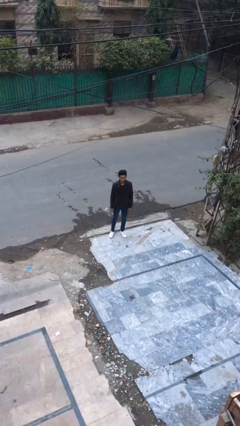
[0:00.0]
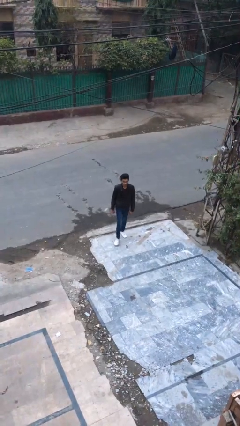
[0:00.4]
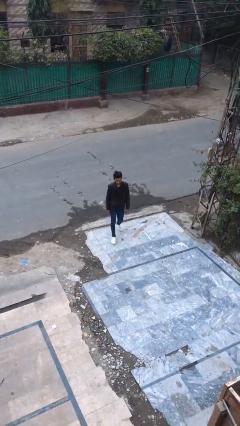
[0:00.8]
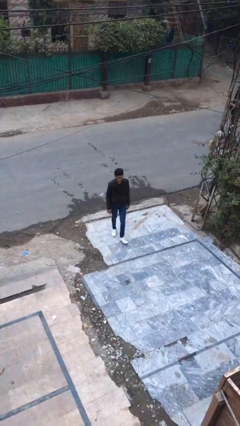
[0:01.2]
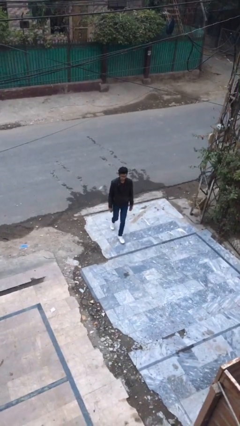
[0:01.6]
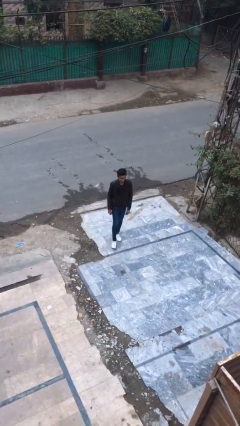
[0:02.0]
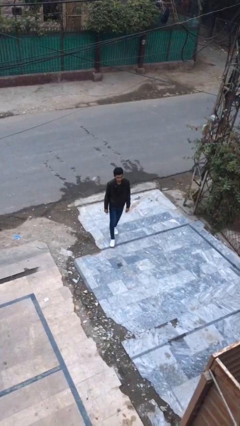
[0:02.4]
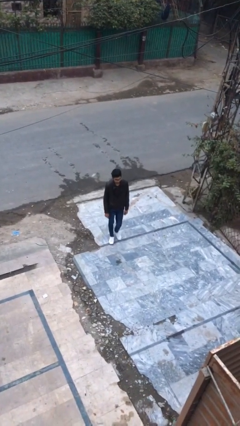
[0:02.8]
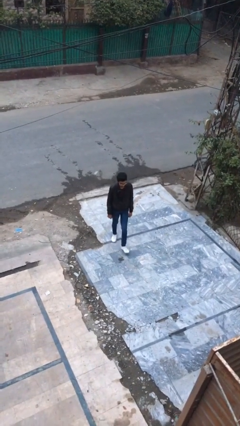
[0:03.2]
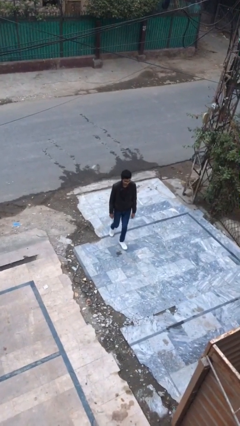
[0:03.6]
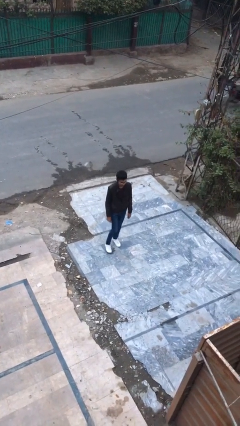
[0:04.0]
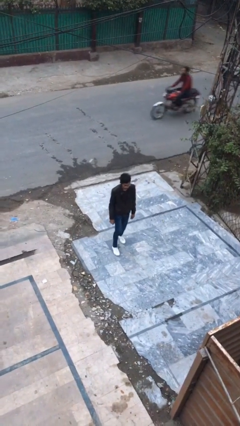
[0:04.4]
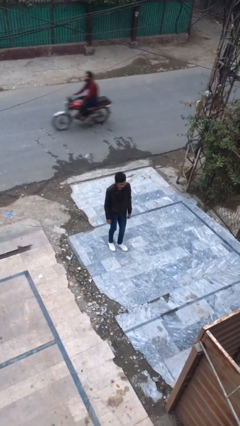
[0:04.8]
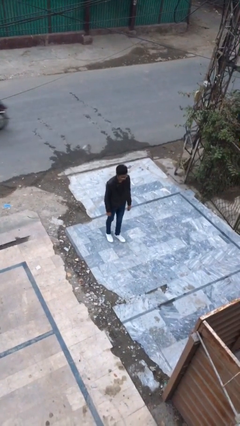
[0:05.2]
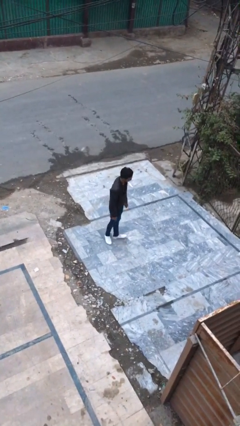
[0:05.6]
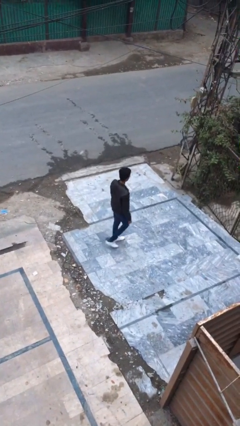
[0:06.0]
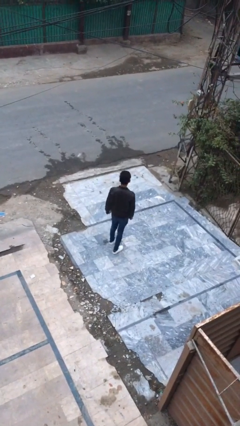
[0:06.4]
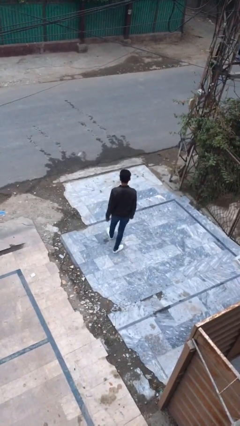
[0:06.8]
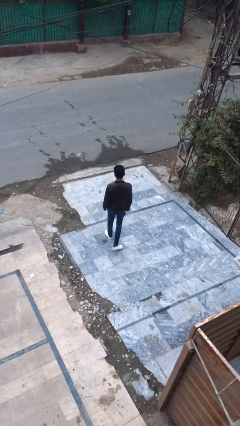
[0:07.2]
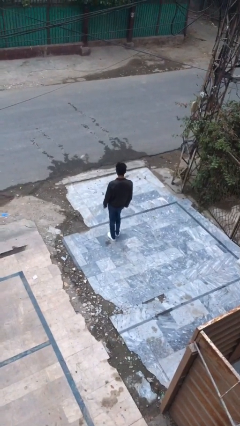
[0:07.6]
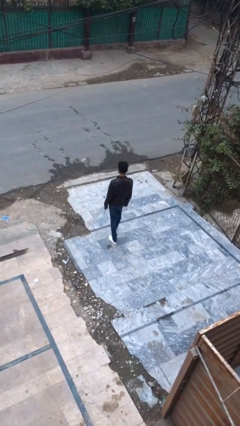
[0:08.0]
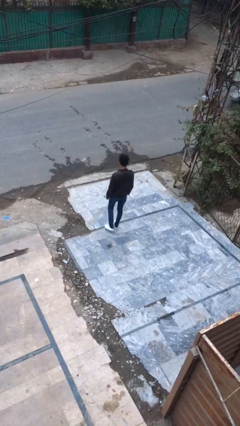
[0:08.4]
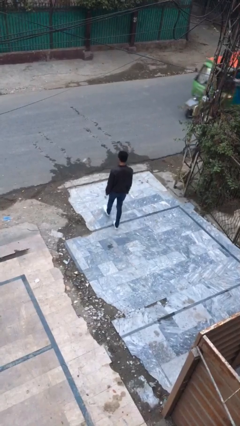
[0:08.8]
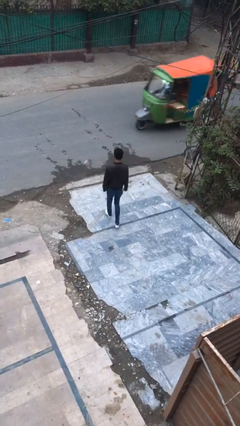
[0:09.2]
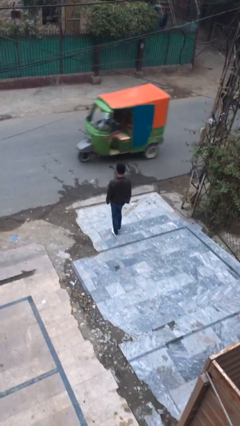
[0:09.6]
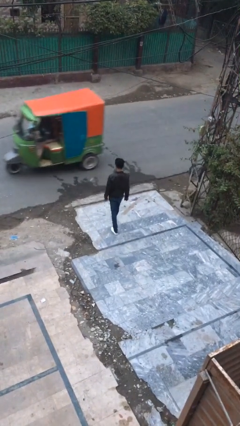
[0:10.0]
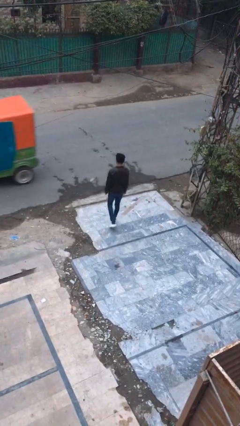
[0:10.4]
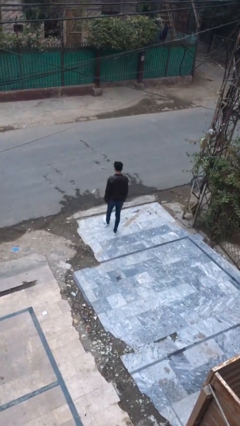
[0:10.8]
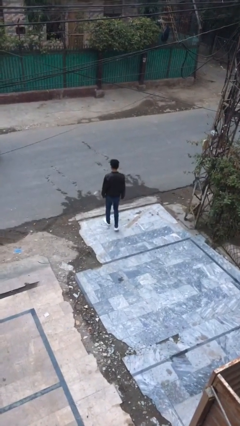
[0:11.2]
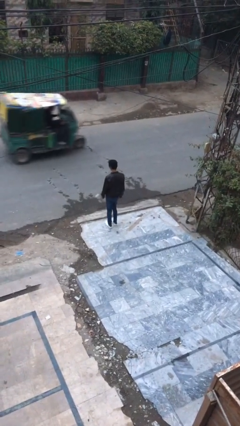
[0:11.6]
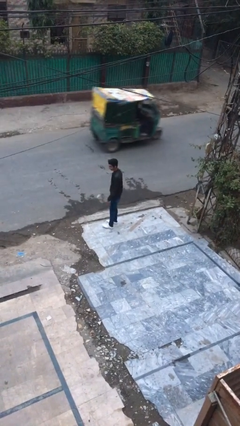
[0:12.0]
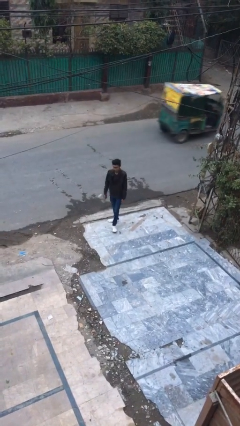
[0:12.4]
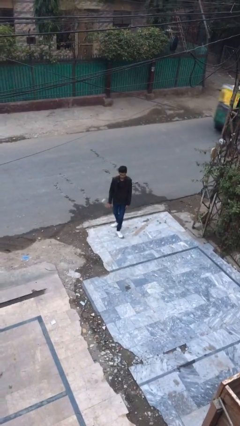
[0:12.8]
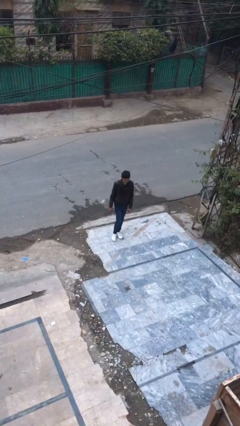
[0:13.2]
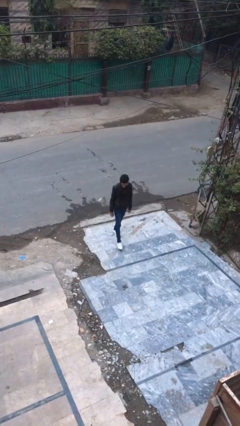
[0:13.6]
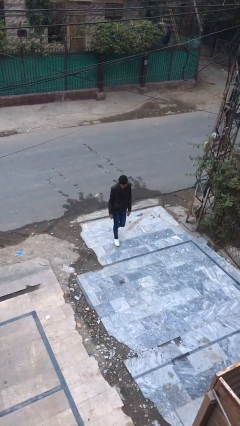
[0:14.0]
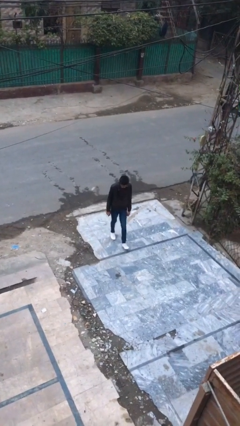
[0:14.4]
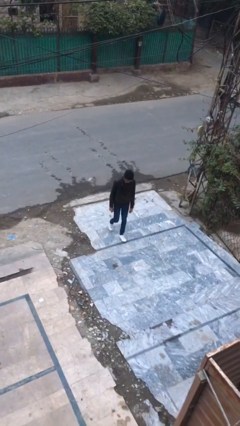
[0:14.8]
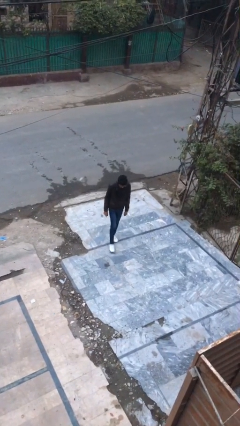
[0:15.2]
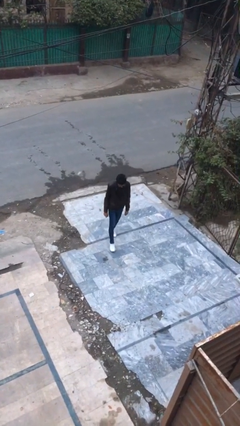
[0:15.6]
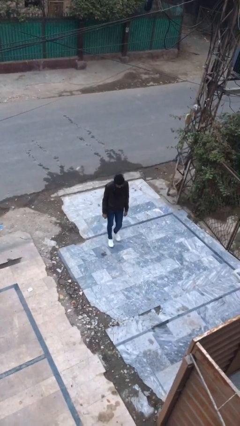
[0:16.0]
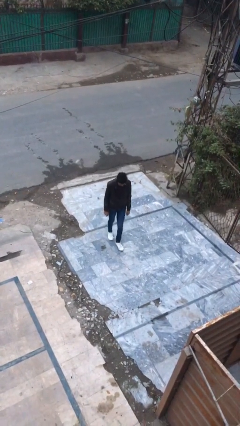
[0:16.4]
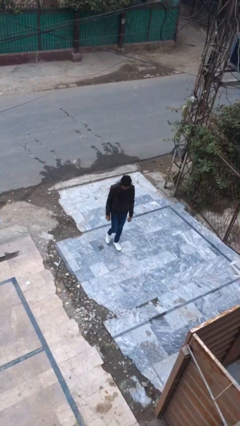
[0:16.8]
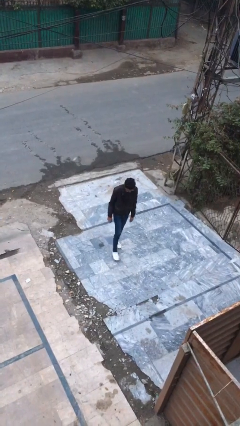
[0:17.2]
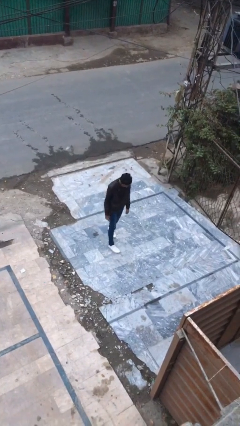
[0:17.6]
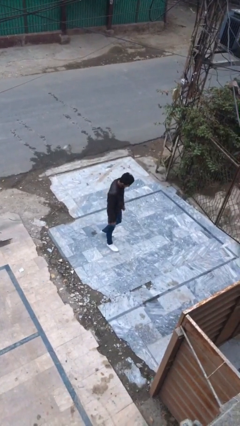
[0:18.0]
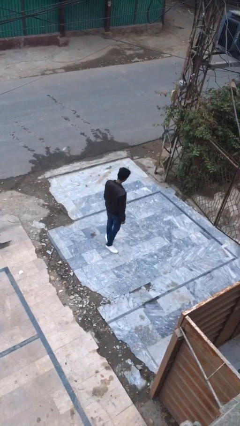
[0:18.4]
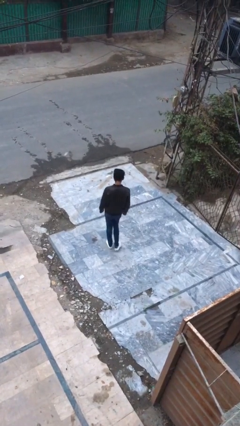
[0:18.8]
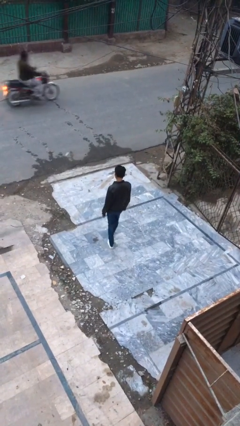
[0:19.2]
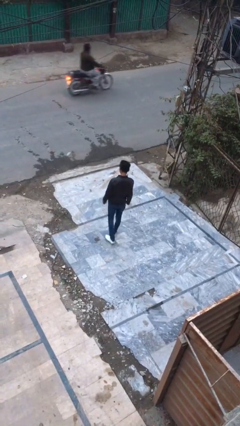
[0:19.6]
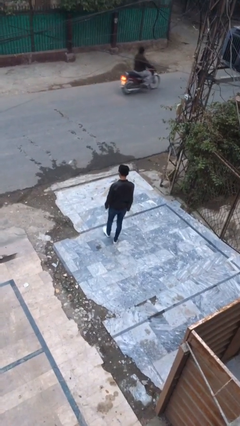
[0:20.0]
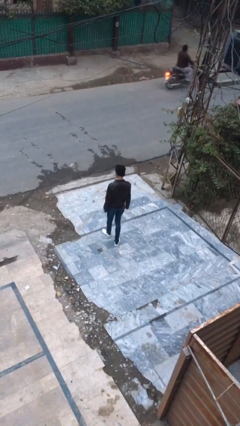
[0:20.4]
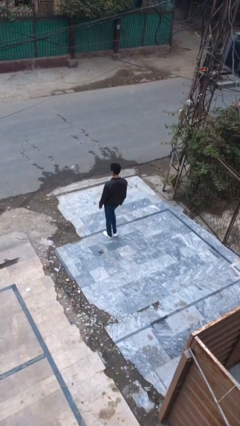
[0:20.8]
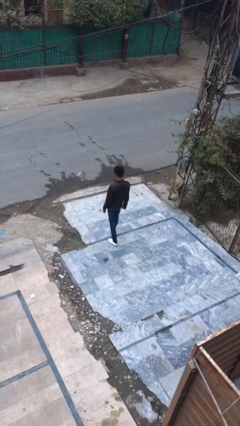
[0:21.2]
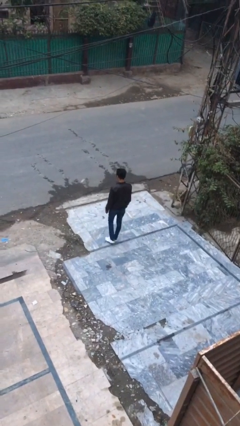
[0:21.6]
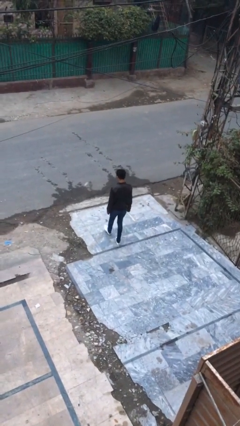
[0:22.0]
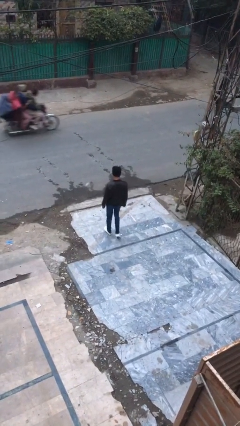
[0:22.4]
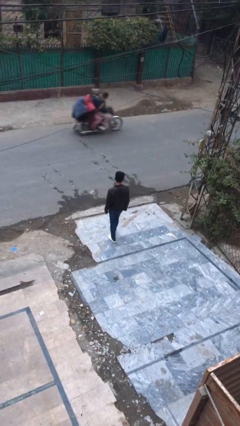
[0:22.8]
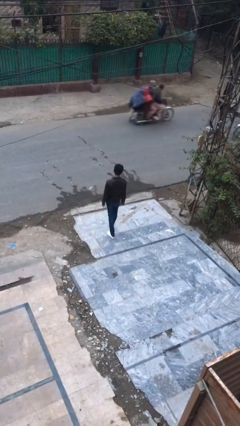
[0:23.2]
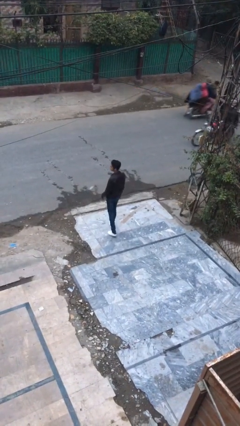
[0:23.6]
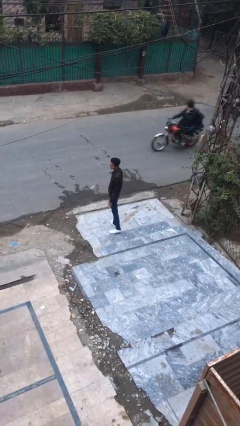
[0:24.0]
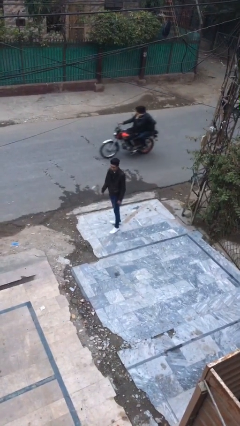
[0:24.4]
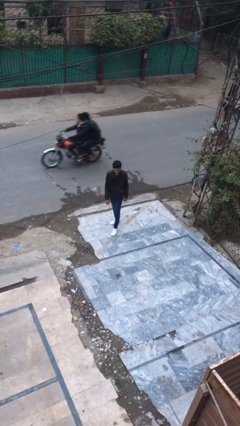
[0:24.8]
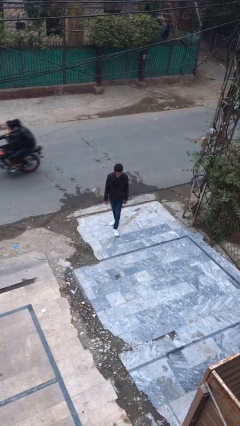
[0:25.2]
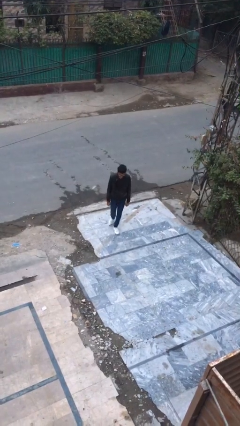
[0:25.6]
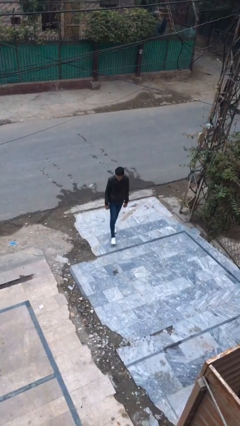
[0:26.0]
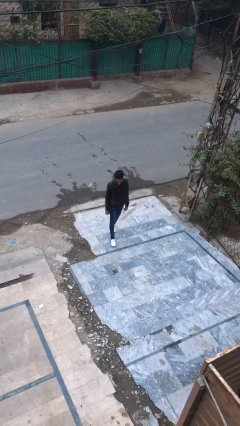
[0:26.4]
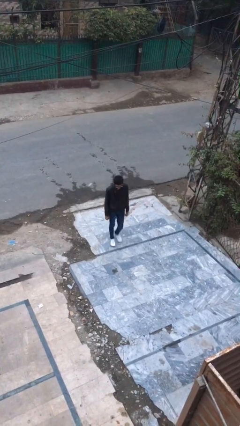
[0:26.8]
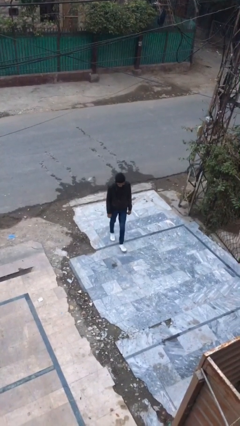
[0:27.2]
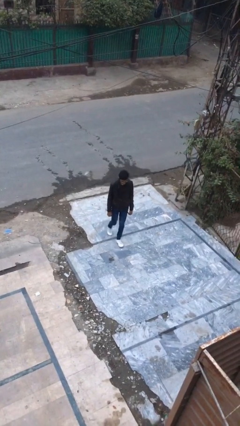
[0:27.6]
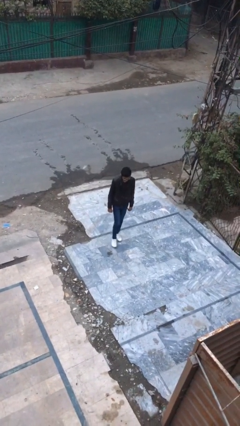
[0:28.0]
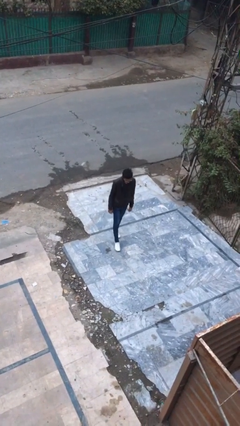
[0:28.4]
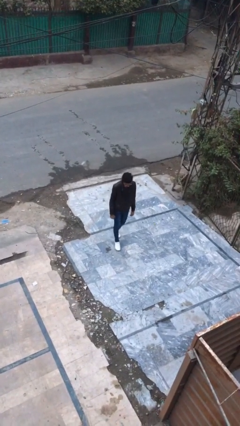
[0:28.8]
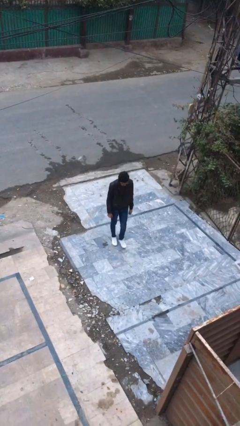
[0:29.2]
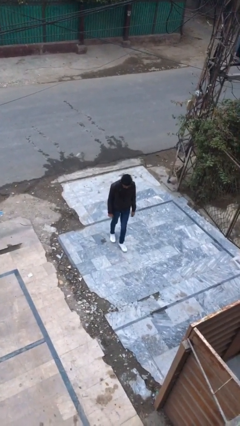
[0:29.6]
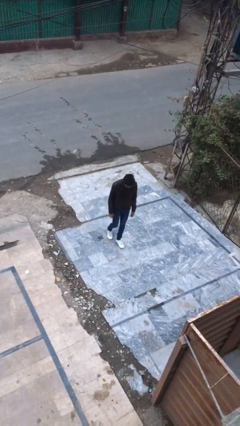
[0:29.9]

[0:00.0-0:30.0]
person walks

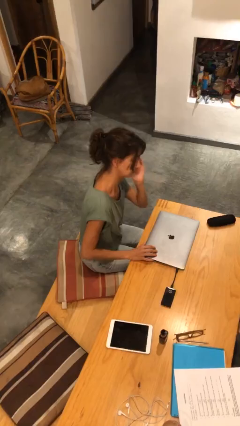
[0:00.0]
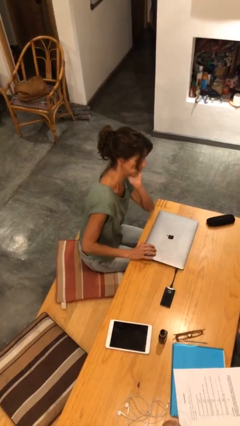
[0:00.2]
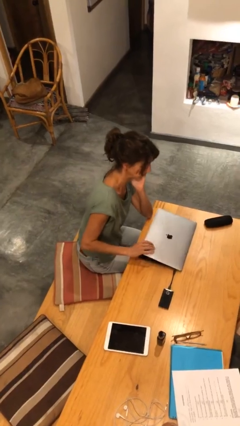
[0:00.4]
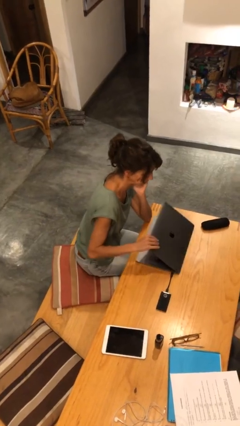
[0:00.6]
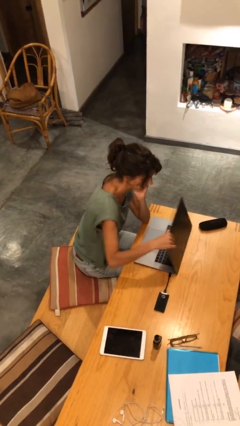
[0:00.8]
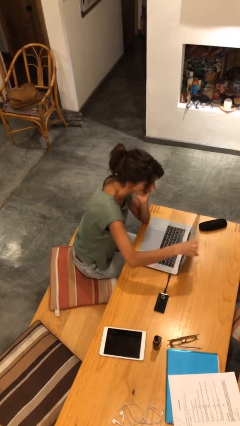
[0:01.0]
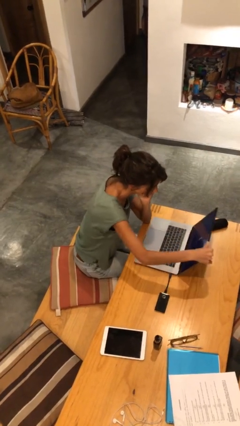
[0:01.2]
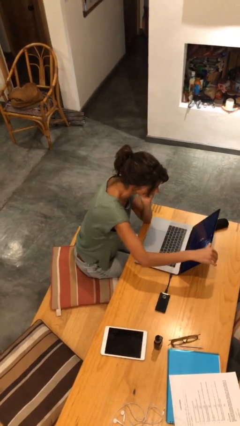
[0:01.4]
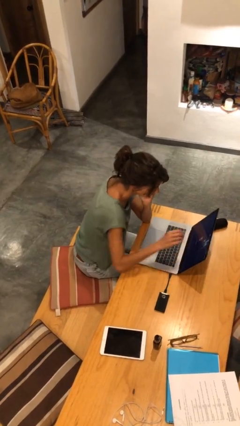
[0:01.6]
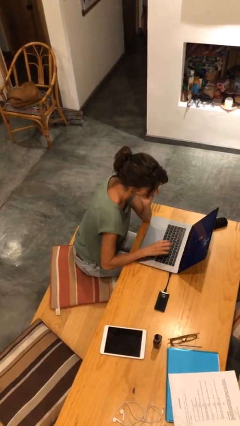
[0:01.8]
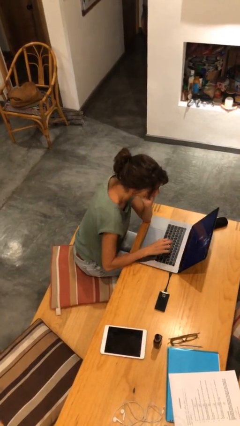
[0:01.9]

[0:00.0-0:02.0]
person opens laptop

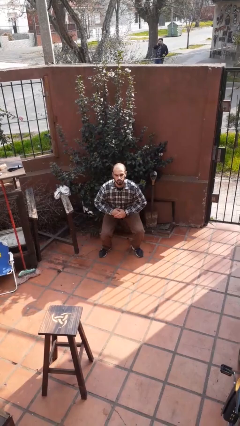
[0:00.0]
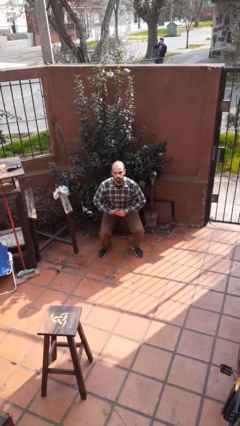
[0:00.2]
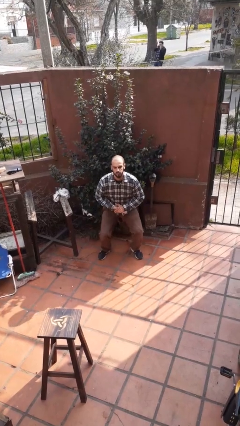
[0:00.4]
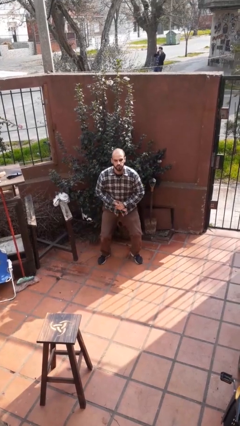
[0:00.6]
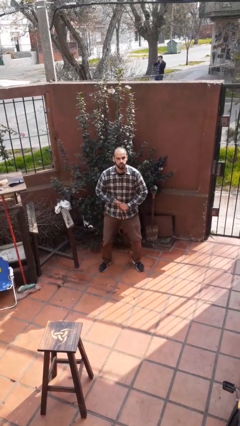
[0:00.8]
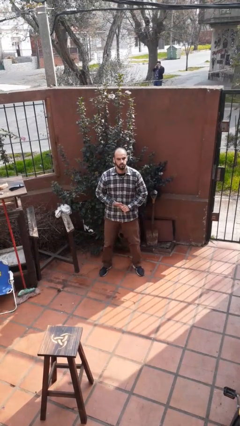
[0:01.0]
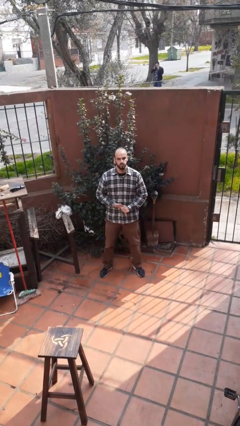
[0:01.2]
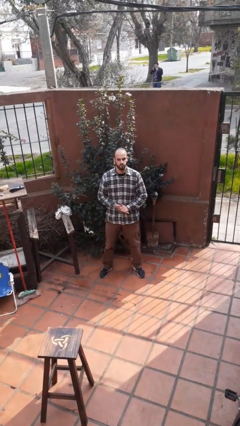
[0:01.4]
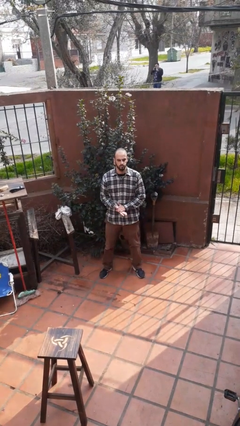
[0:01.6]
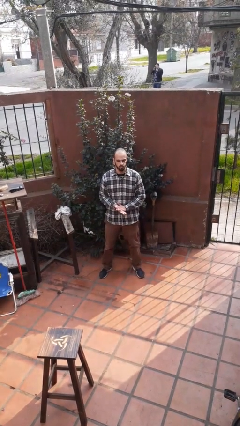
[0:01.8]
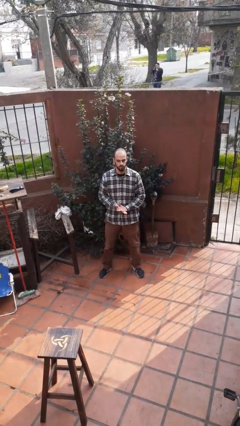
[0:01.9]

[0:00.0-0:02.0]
person stands up
